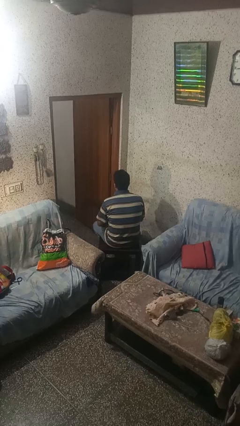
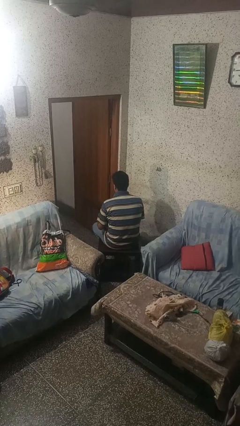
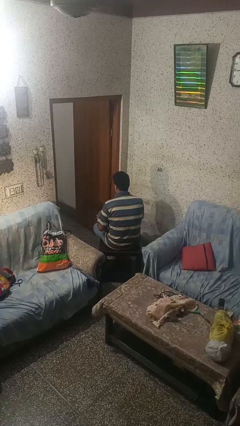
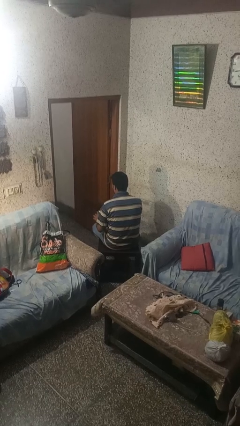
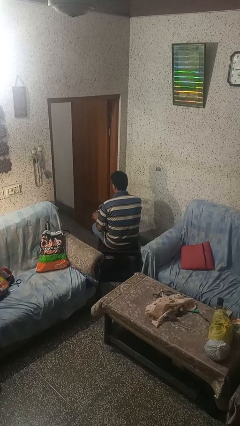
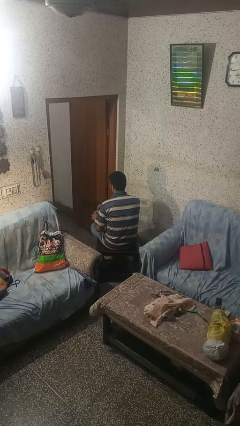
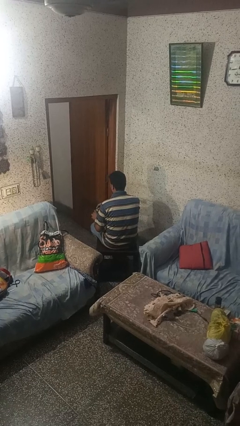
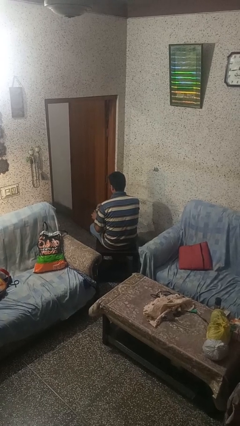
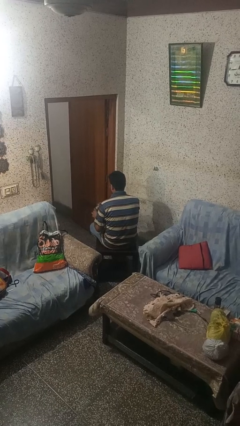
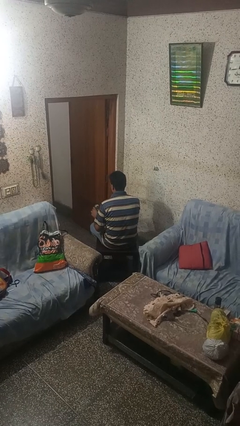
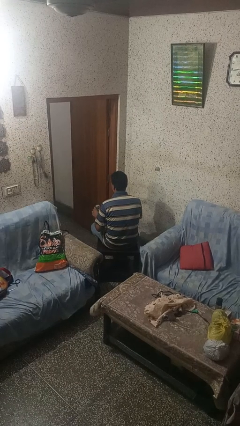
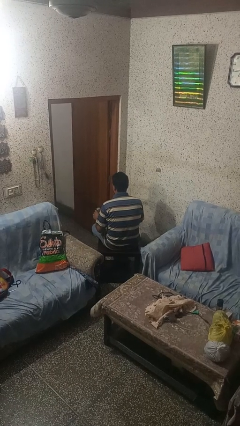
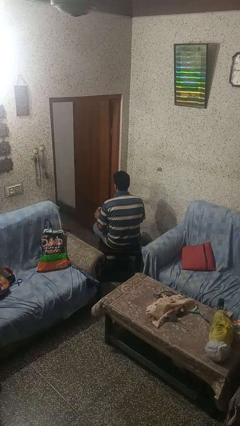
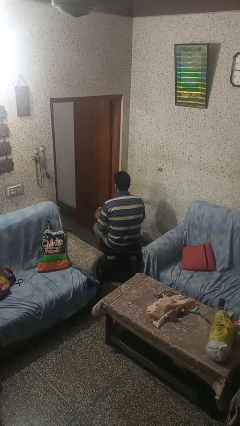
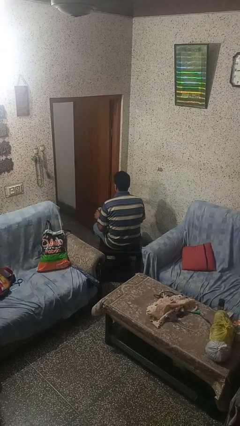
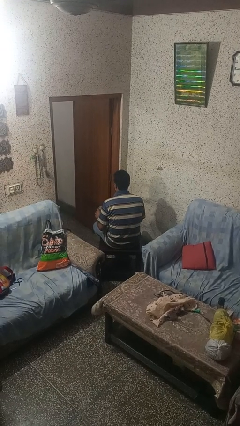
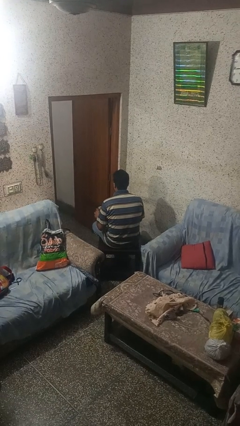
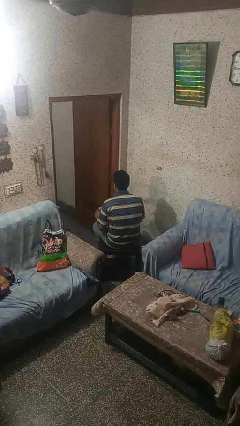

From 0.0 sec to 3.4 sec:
person opens beverage can

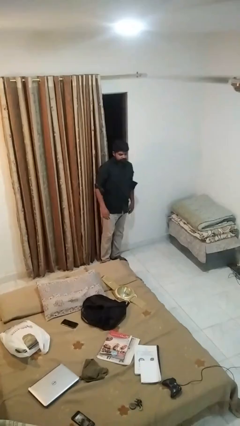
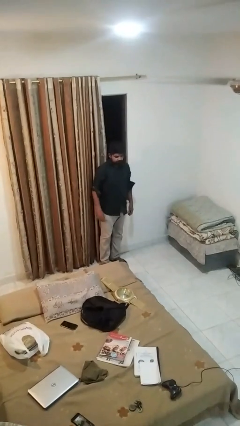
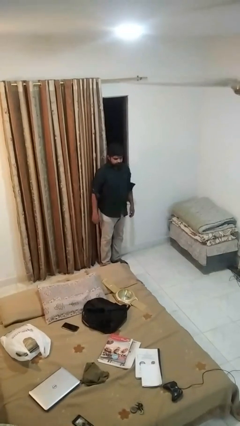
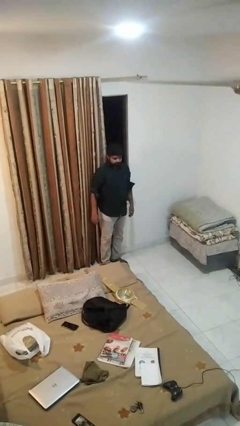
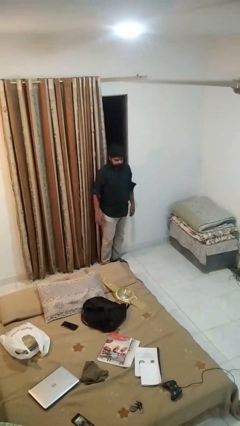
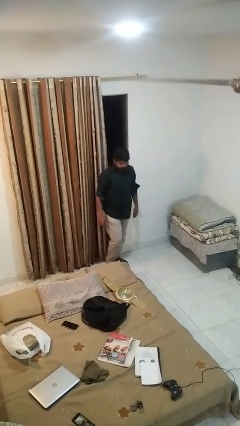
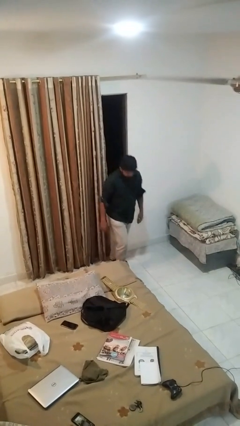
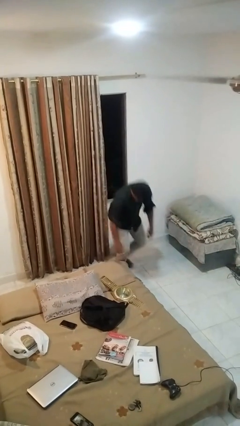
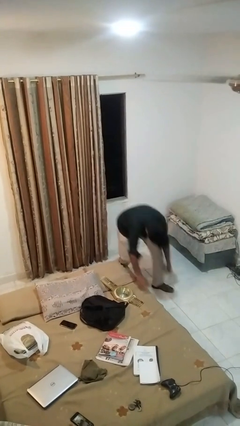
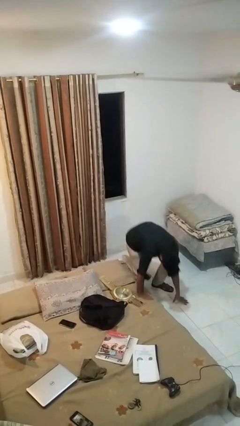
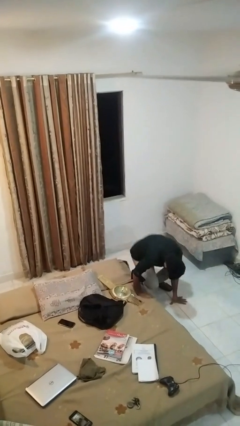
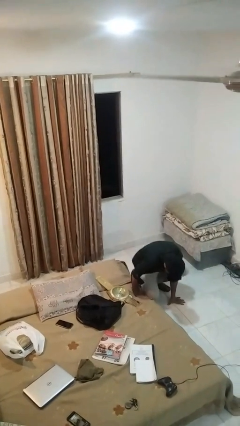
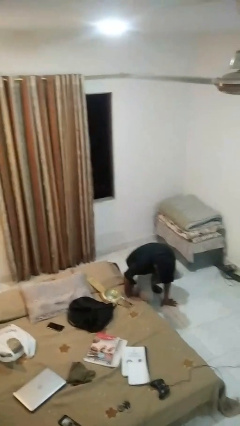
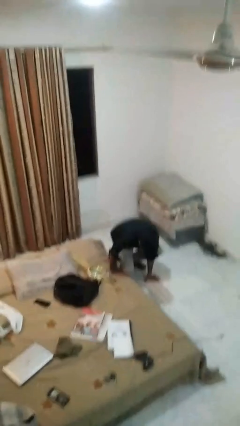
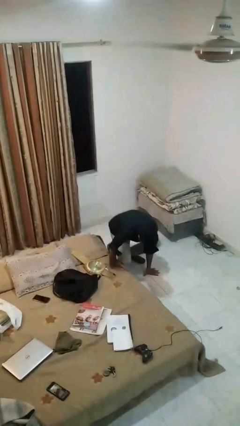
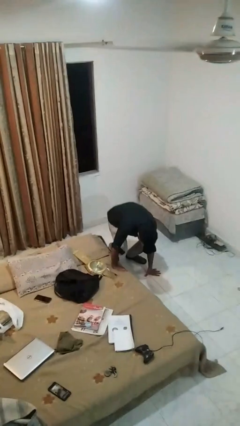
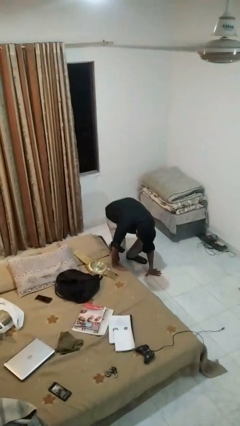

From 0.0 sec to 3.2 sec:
person trips on object on floor

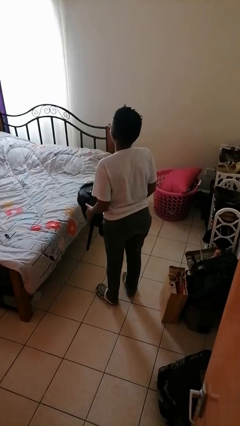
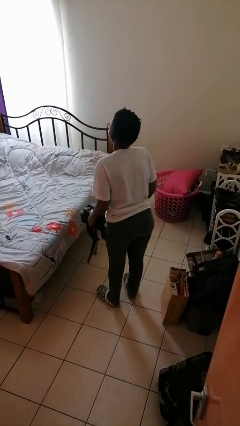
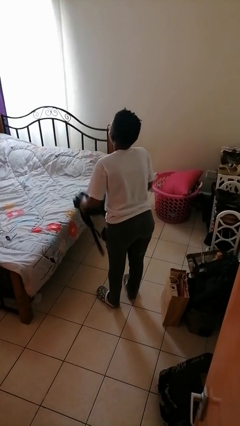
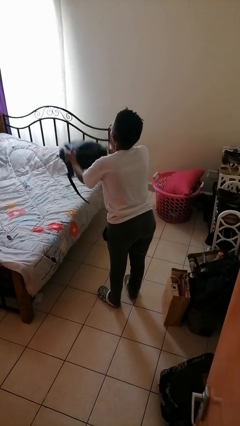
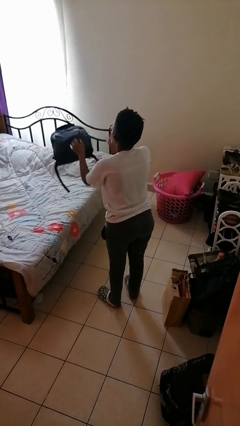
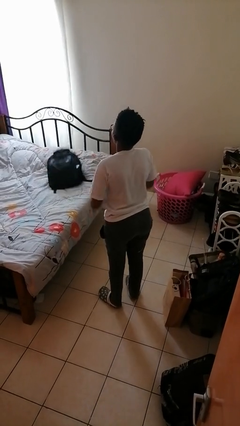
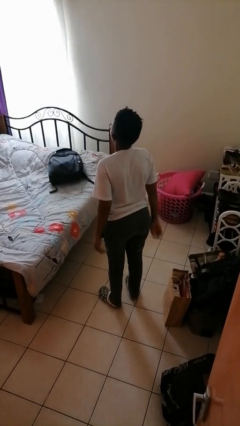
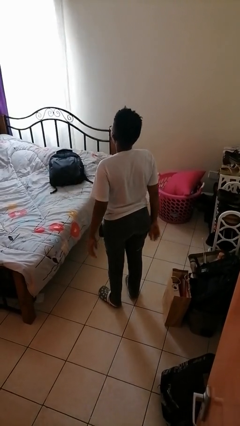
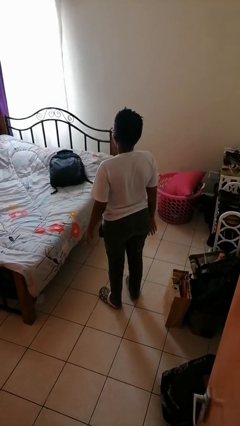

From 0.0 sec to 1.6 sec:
person throws object on bed

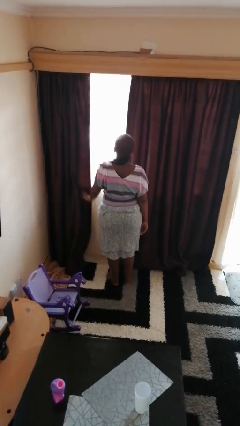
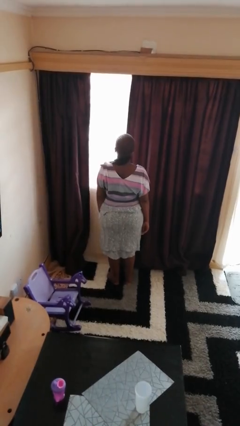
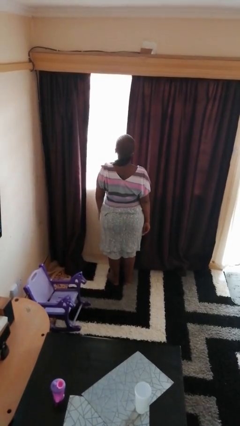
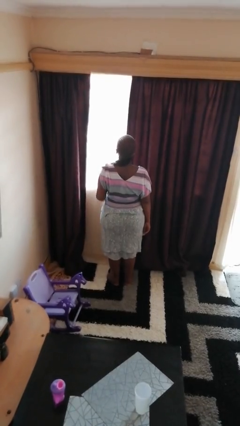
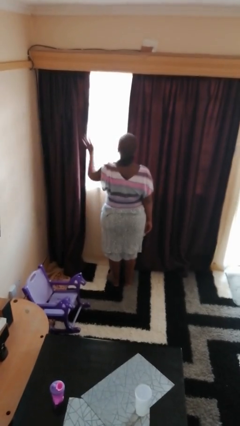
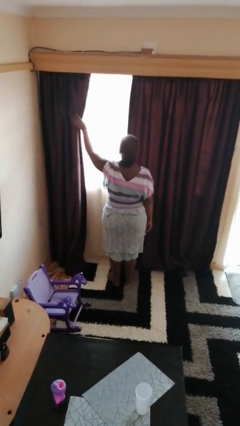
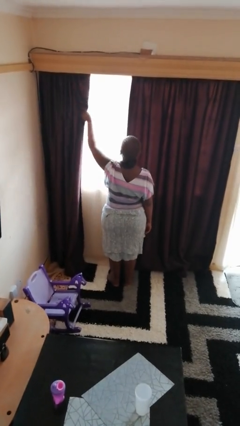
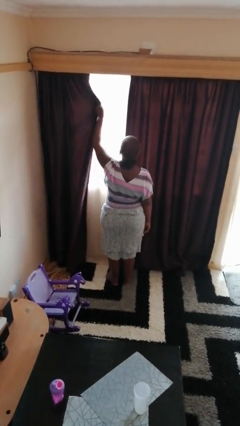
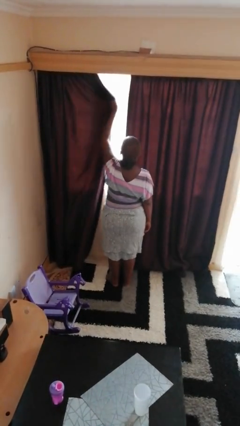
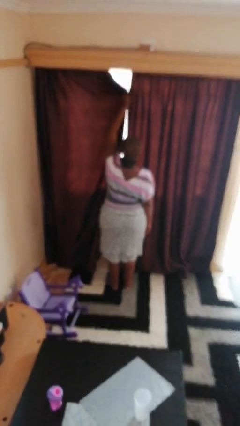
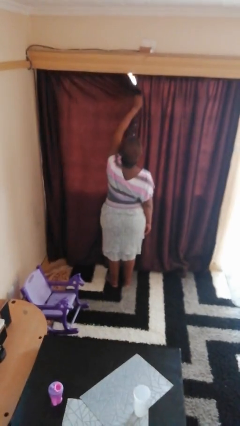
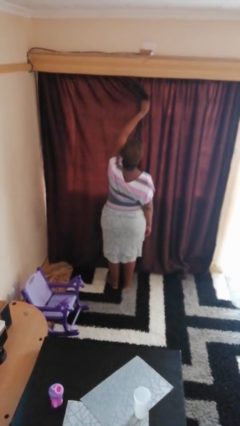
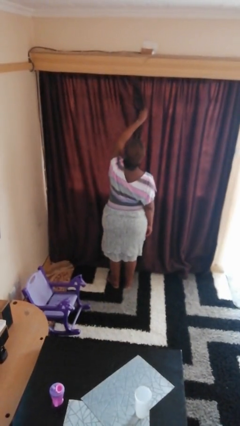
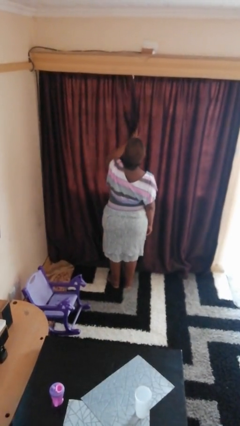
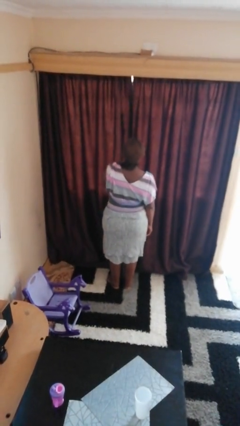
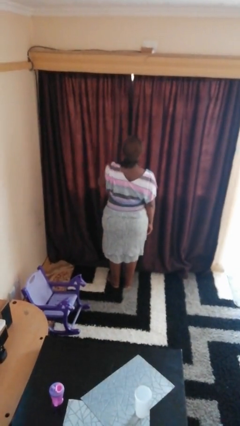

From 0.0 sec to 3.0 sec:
person closes curtains

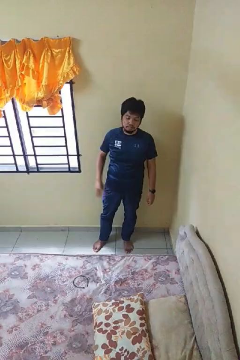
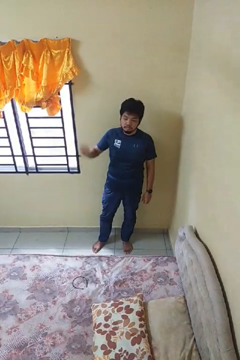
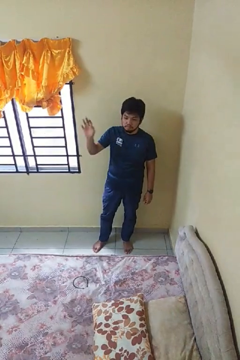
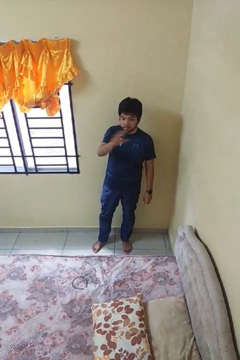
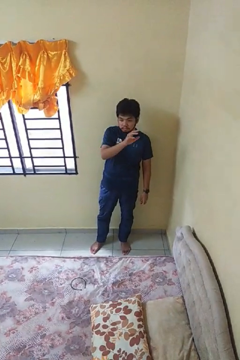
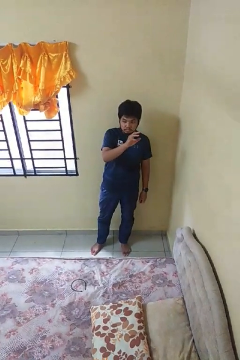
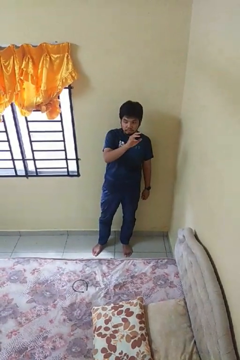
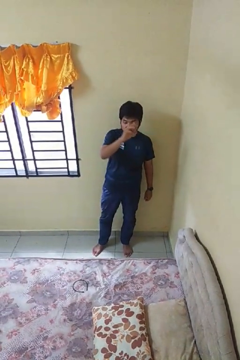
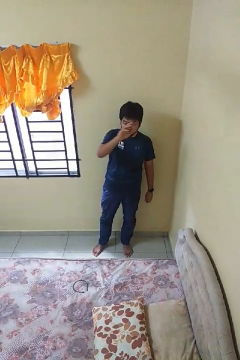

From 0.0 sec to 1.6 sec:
person gestures swipe left

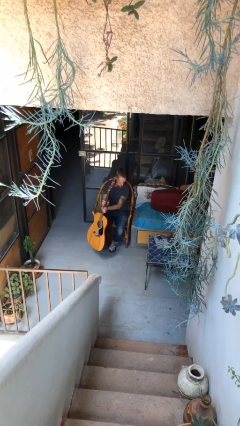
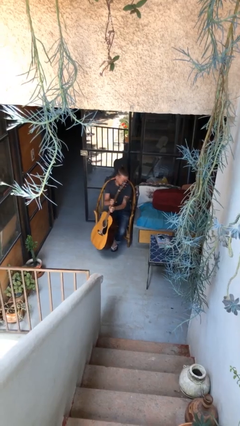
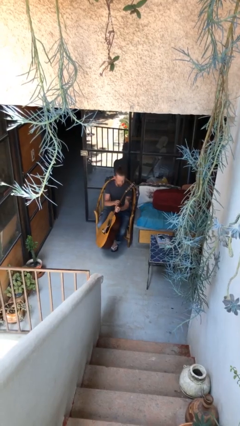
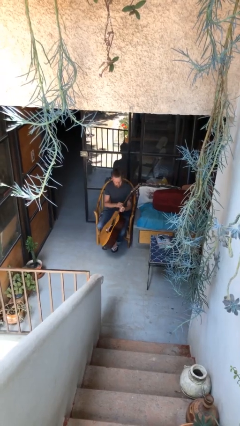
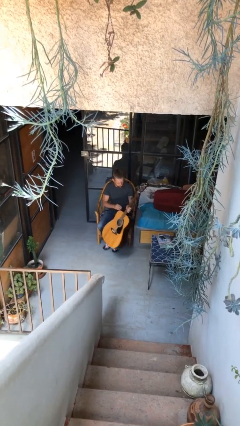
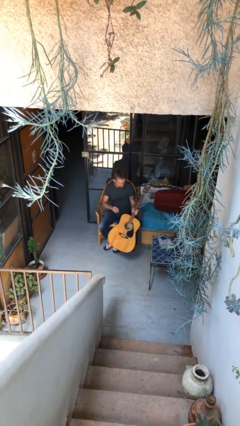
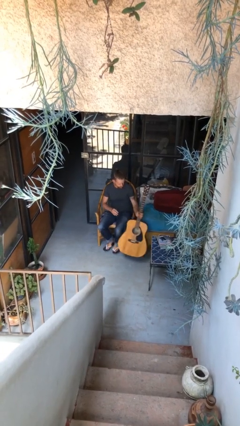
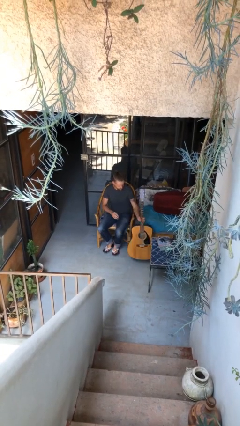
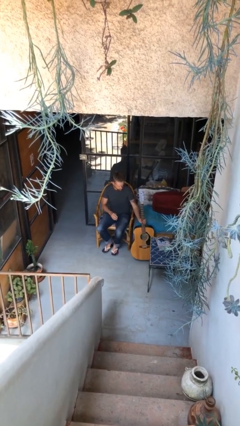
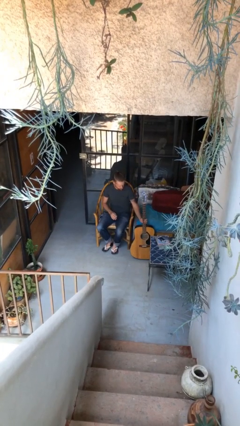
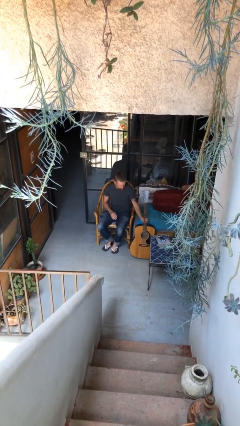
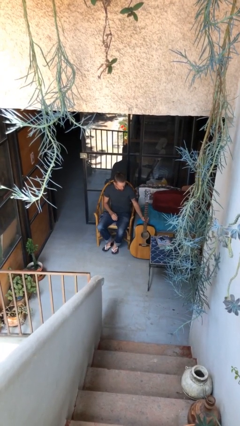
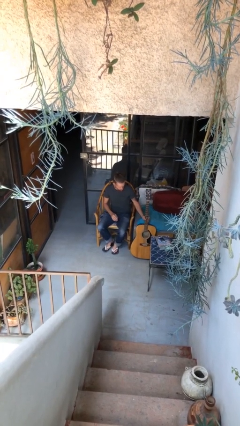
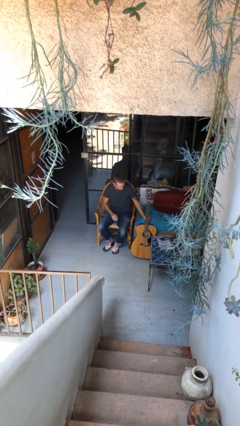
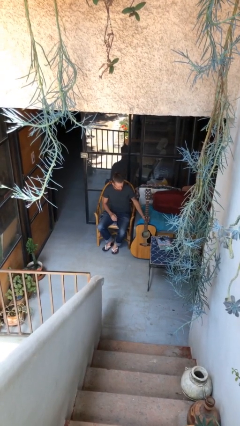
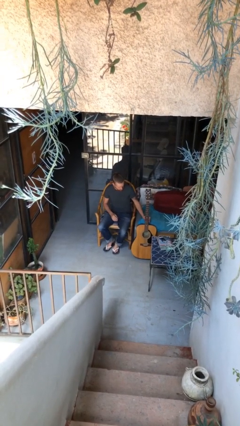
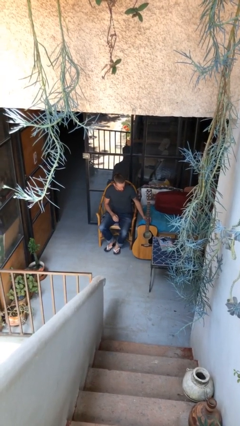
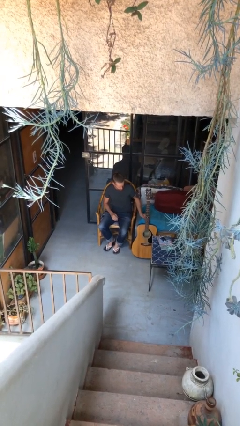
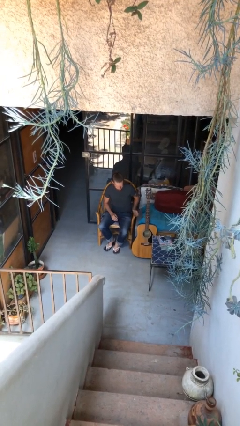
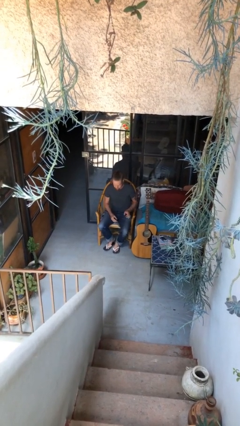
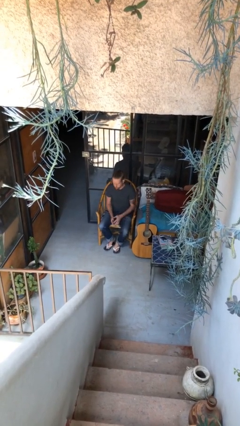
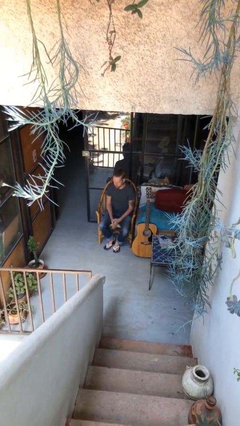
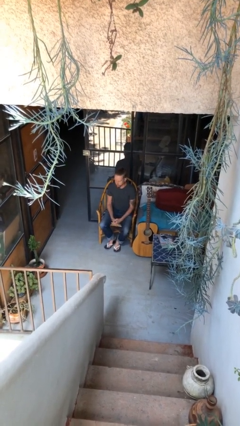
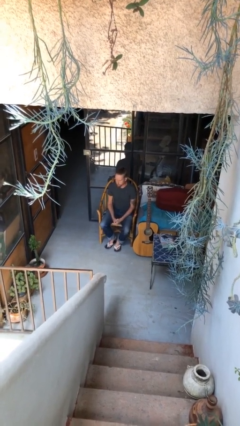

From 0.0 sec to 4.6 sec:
person puts down object on floor

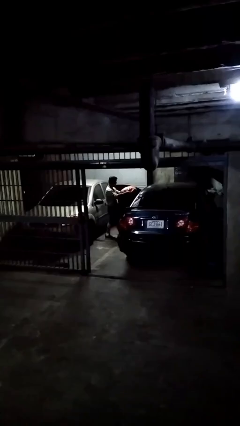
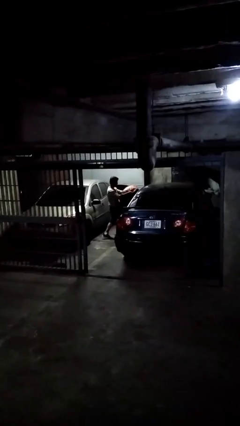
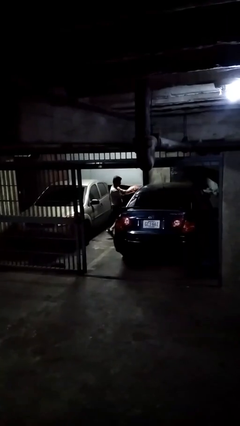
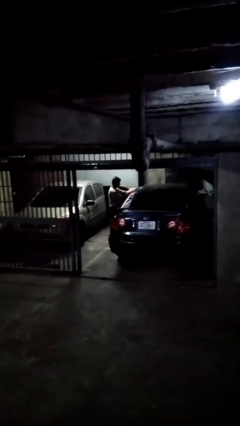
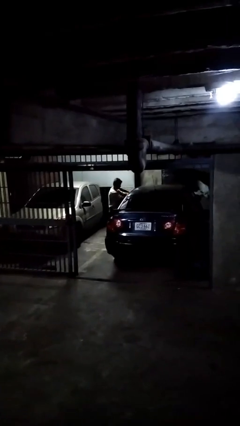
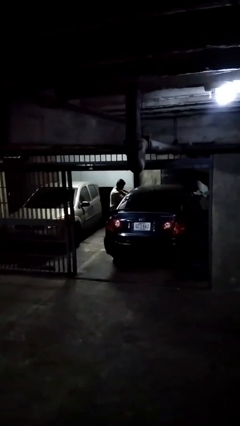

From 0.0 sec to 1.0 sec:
person loads car
